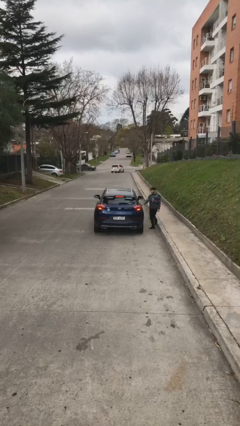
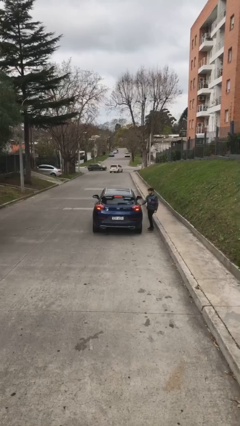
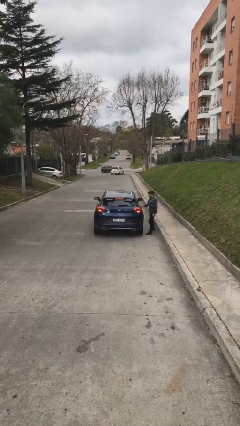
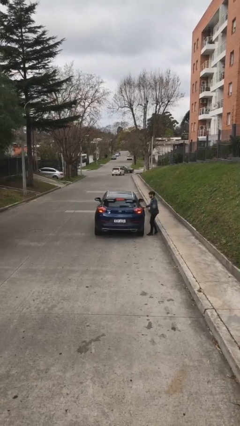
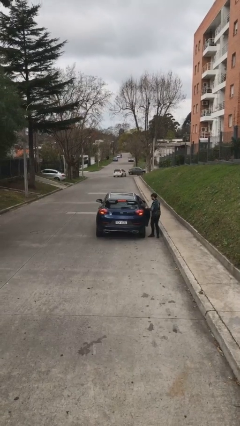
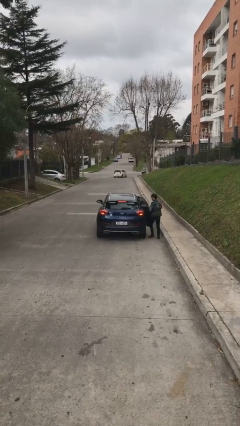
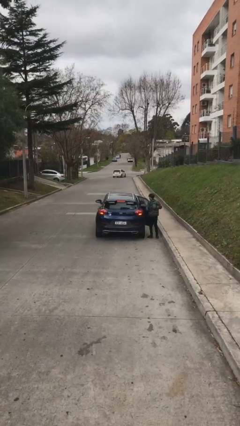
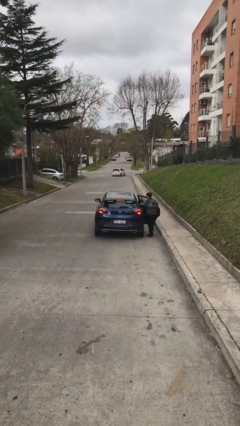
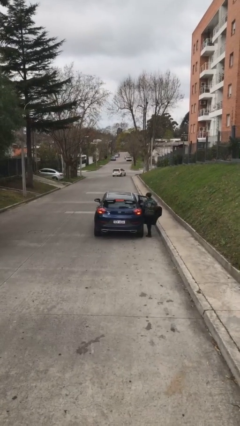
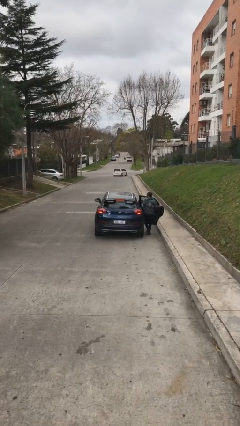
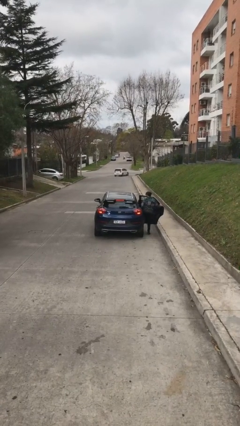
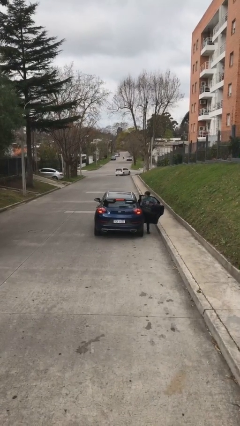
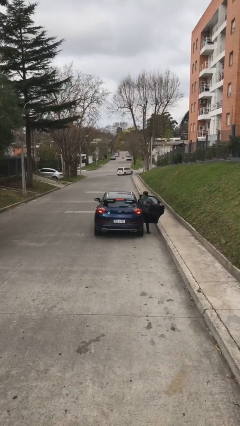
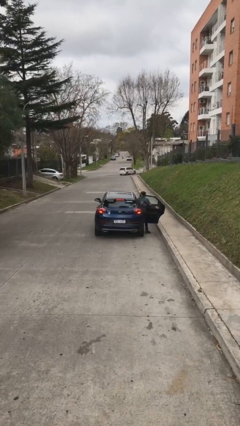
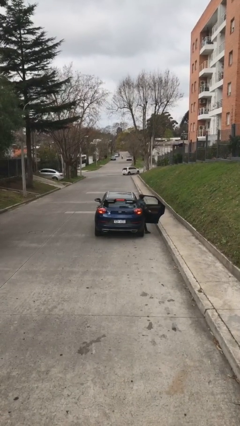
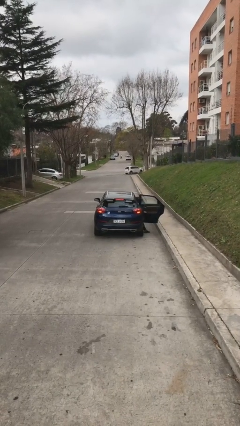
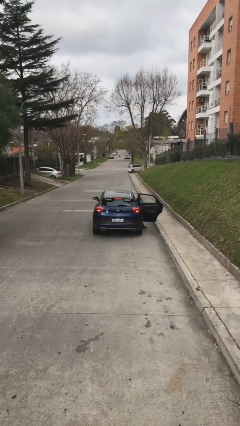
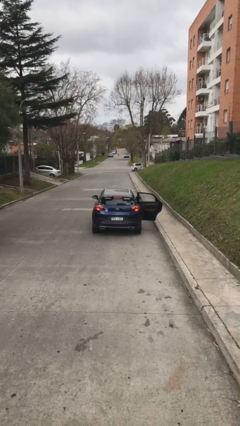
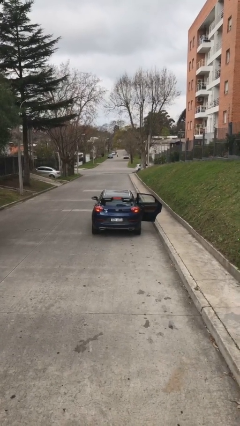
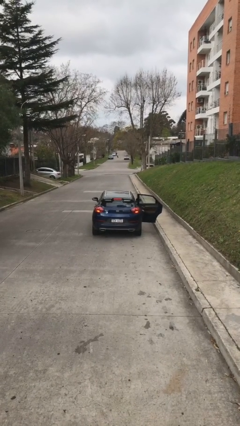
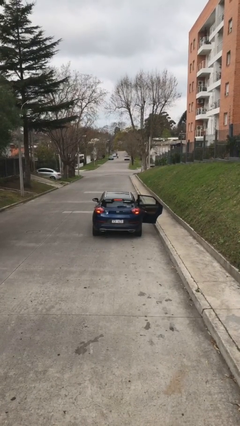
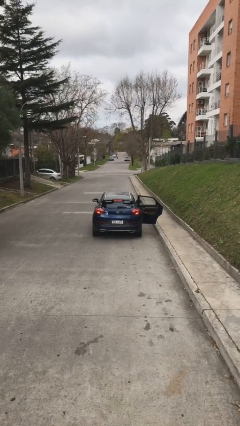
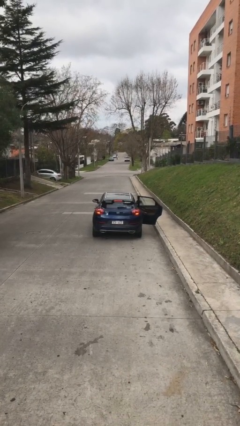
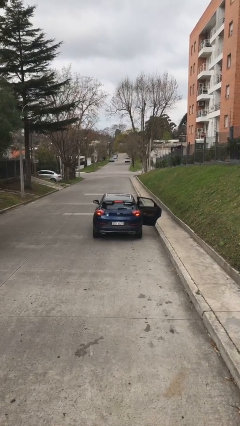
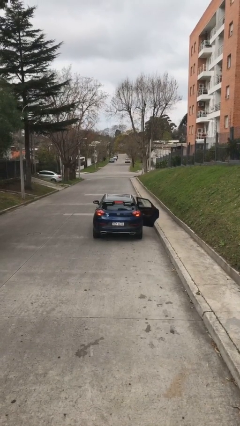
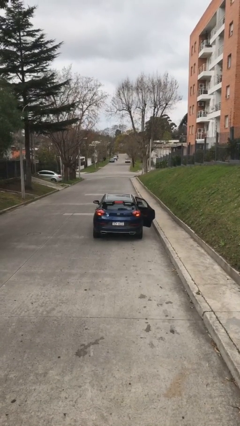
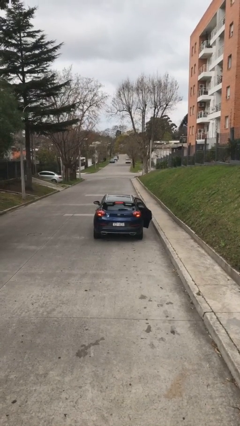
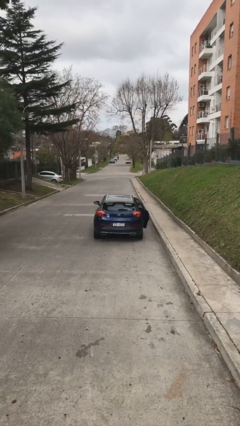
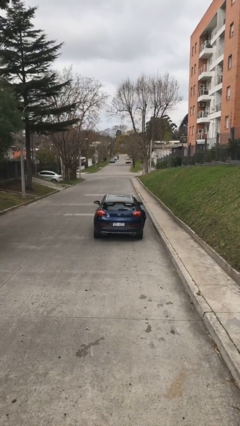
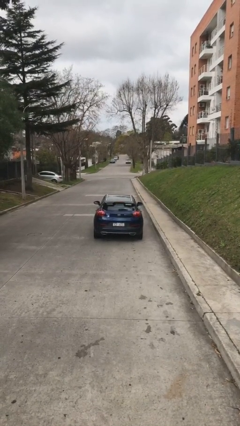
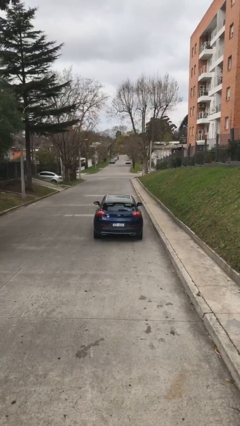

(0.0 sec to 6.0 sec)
car picks up person

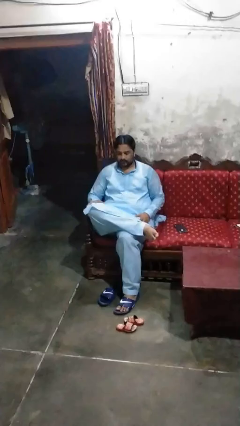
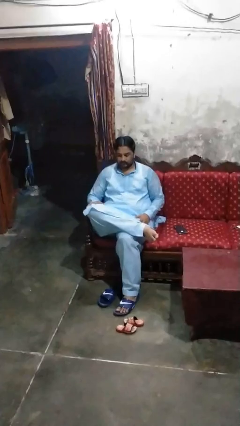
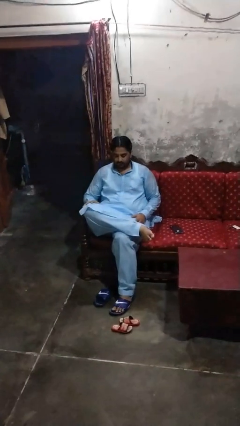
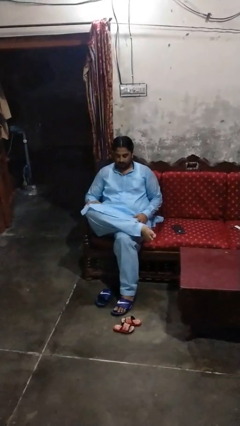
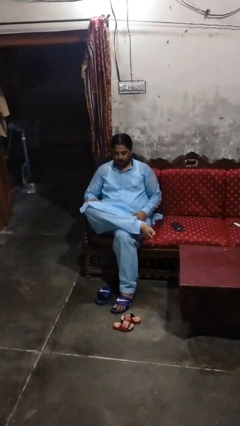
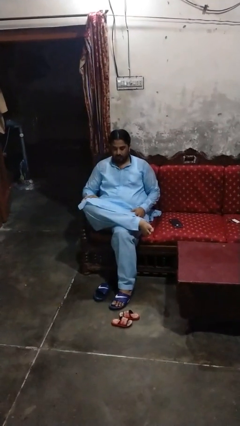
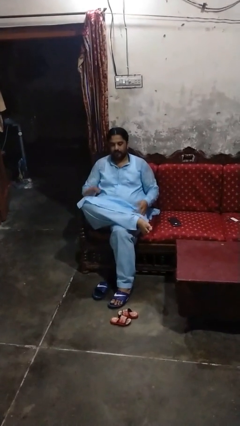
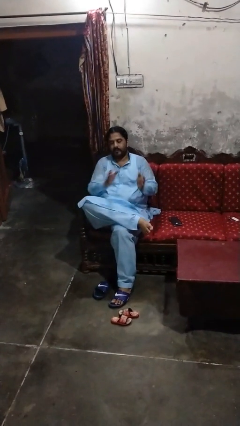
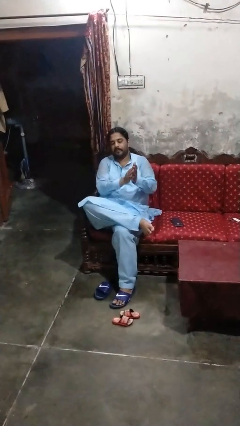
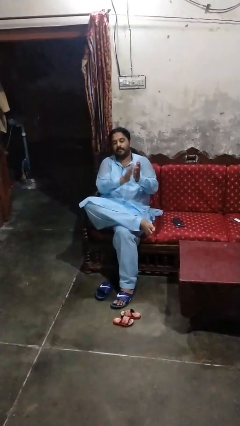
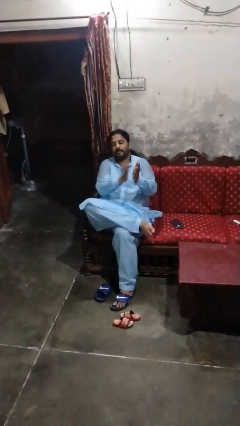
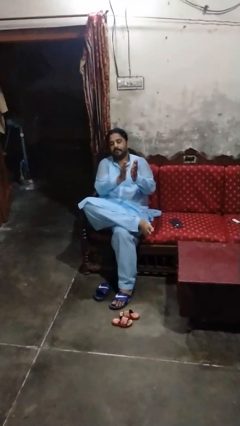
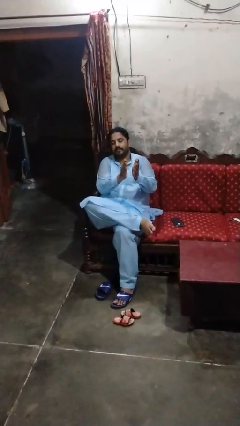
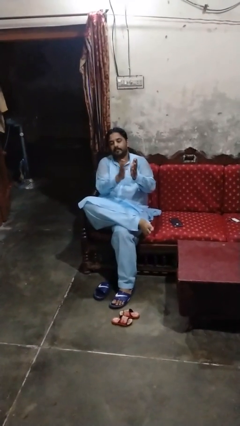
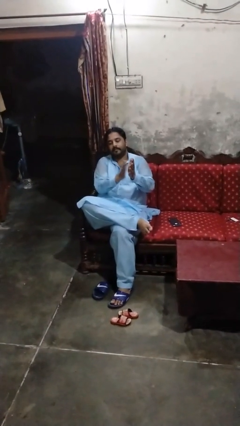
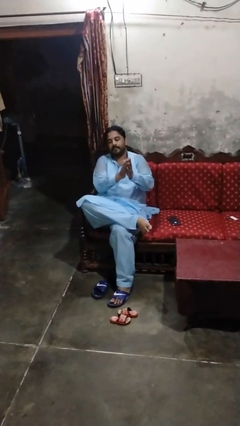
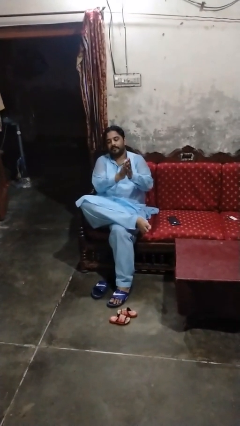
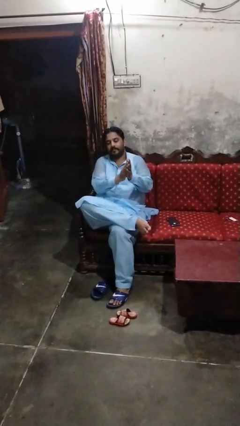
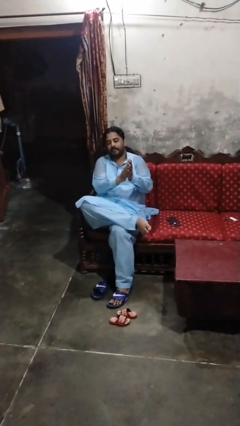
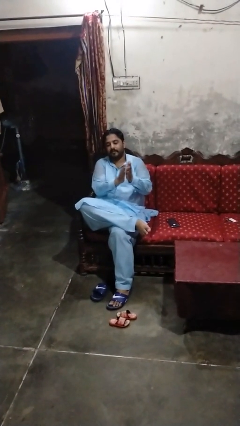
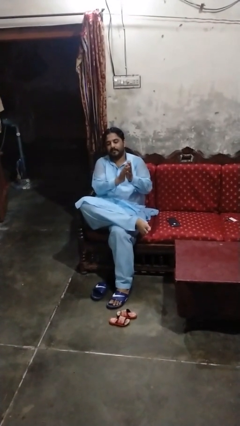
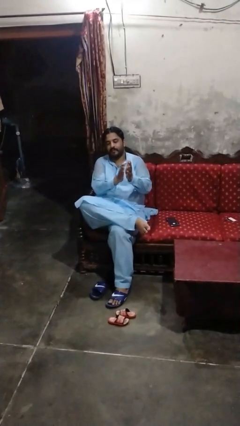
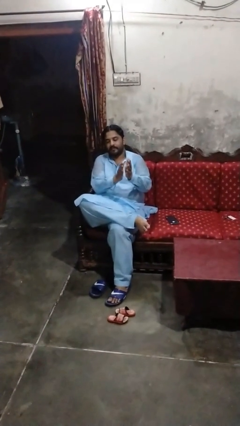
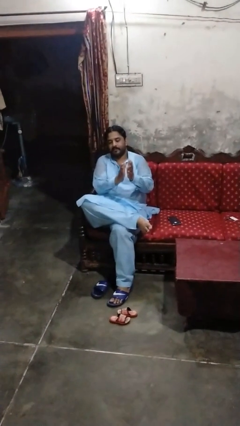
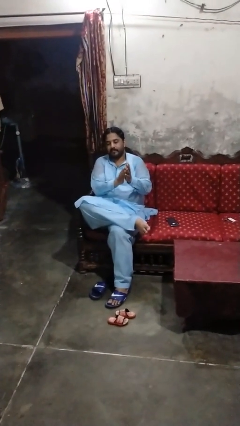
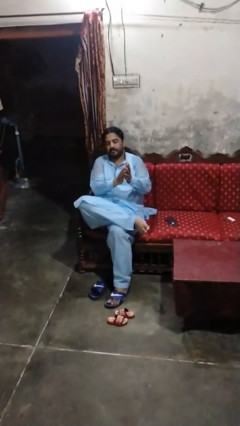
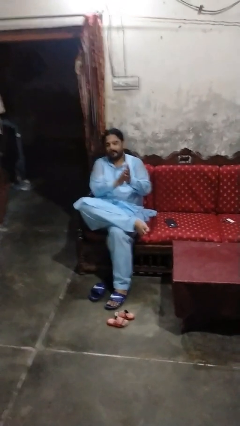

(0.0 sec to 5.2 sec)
person claps hands

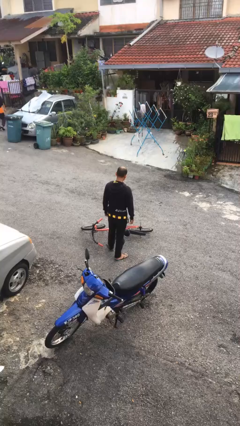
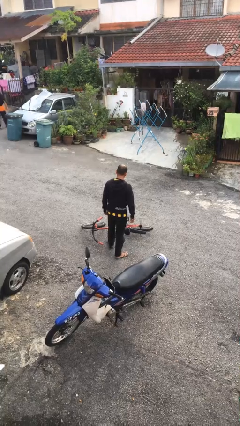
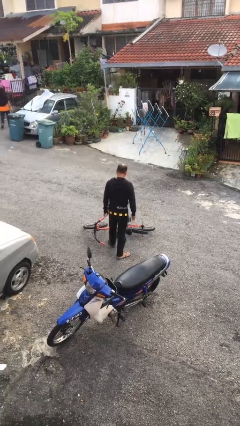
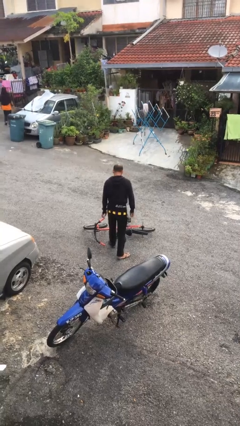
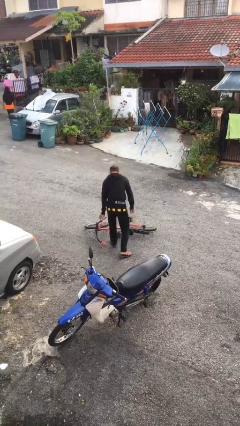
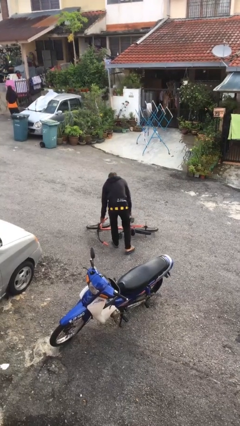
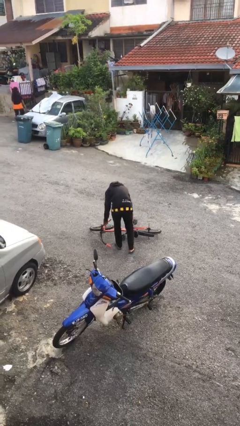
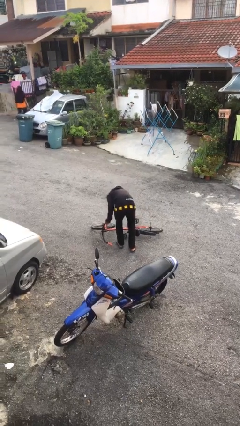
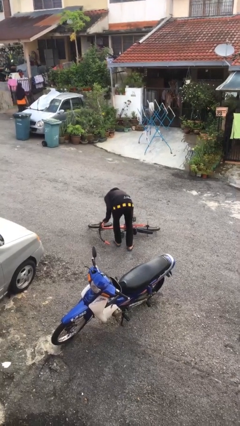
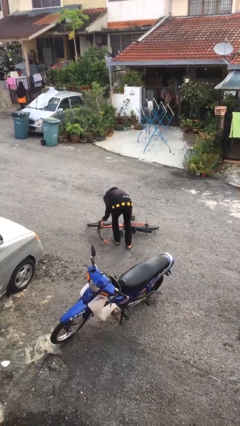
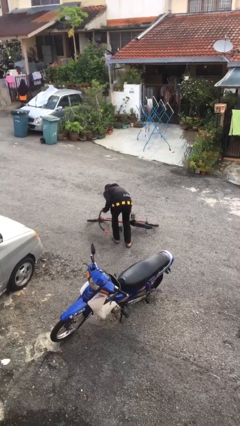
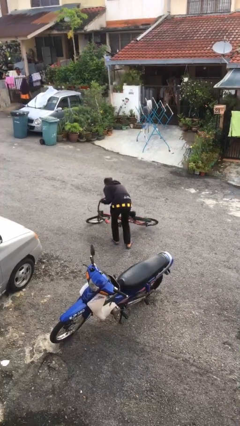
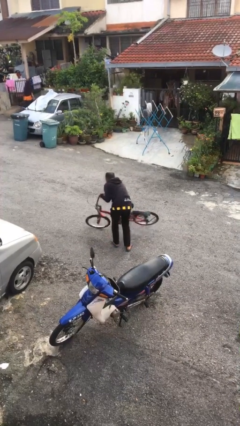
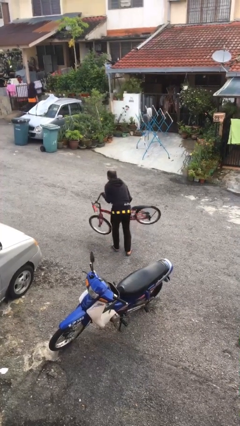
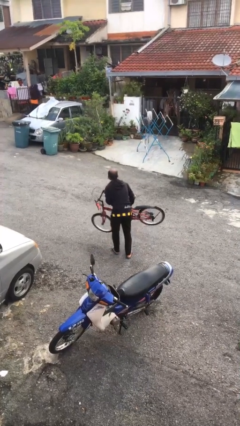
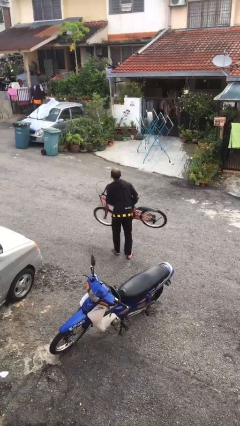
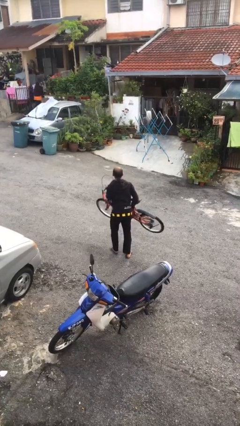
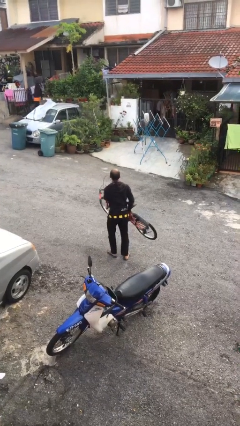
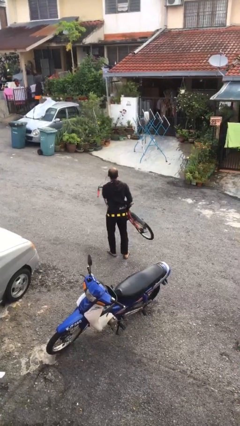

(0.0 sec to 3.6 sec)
person picks up object from floor

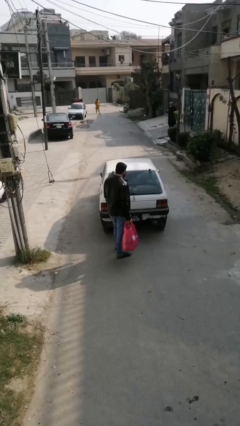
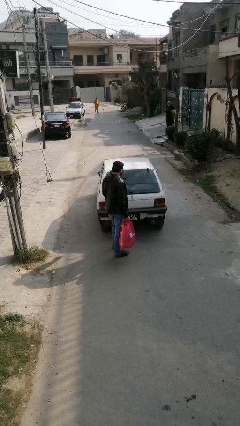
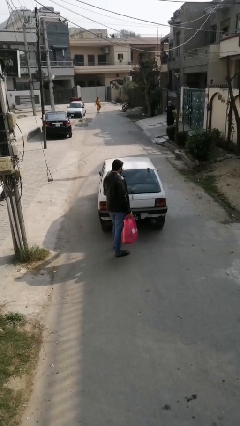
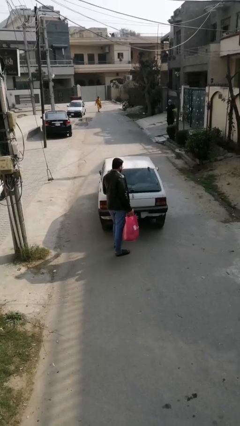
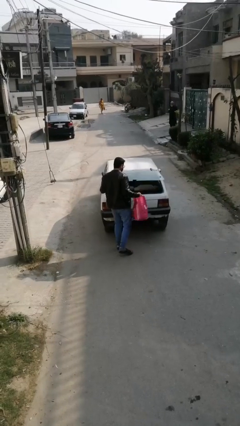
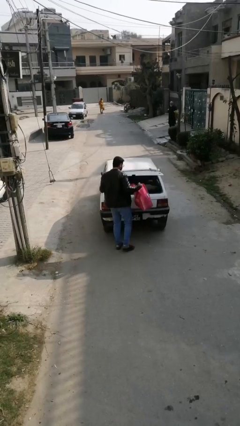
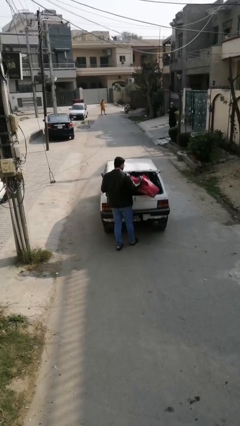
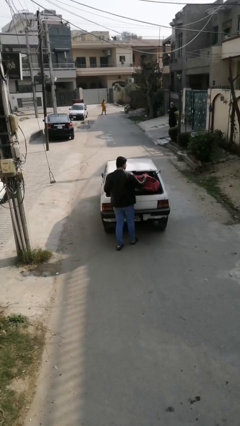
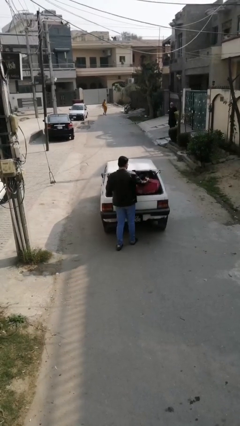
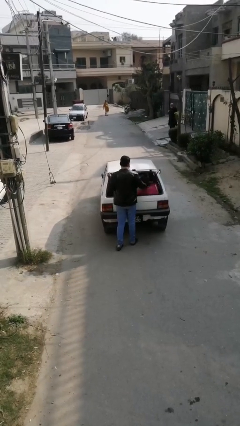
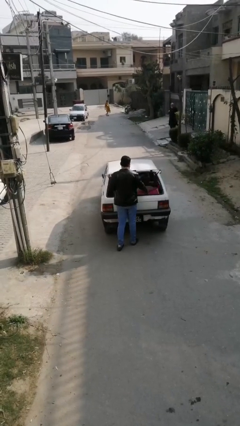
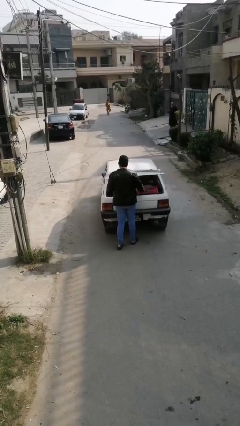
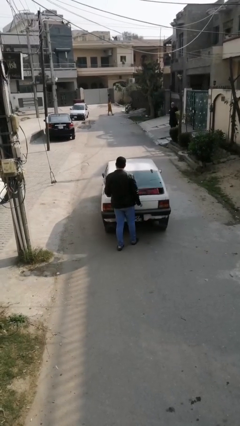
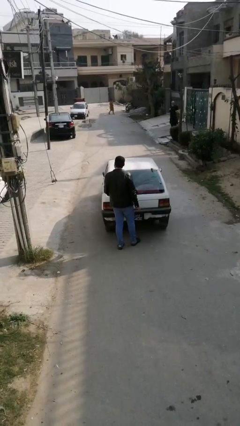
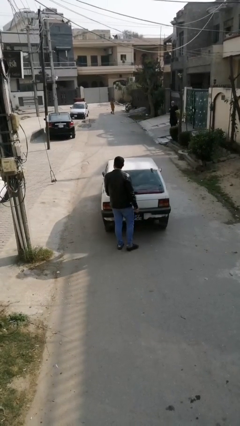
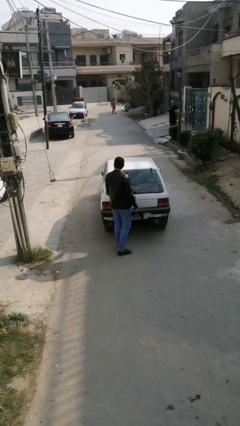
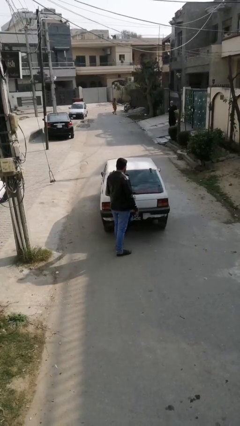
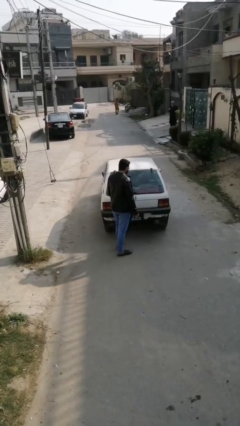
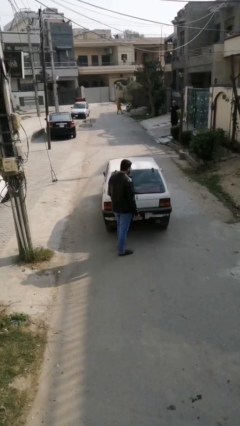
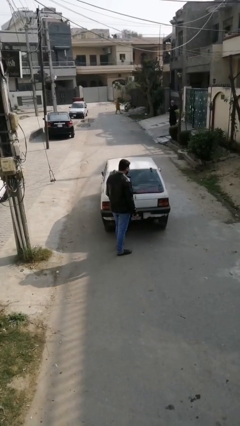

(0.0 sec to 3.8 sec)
person loads car
